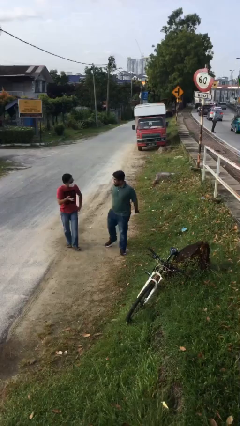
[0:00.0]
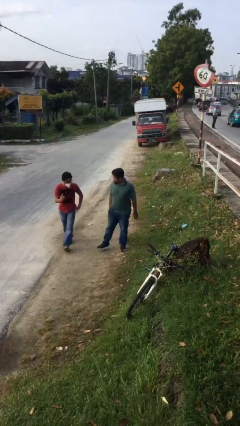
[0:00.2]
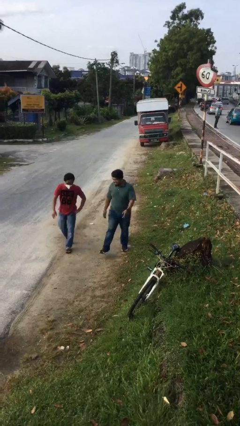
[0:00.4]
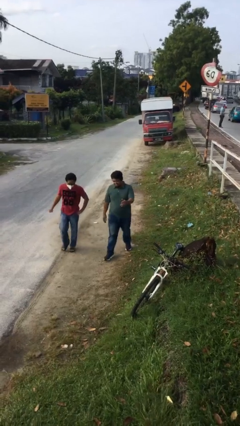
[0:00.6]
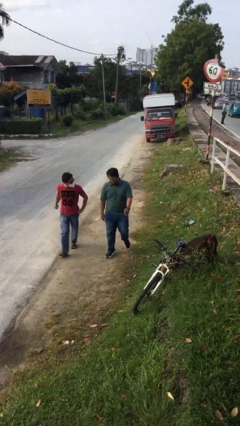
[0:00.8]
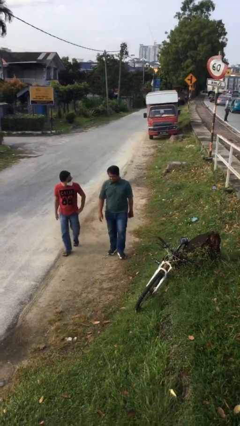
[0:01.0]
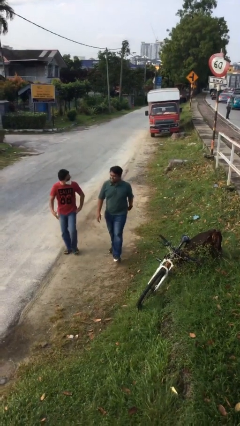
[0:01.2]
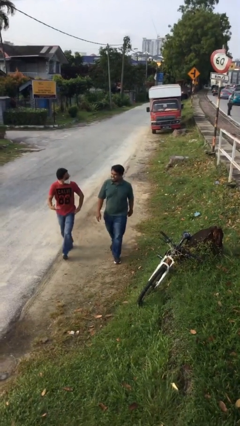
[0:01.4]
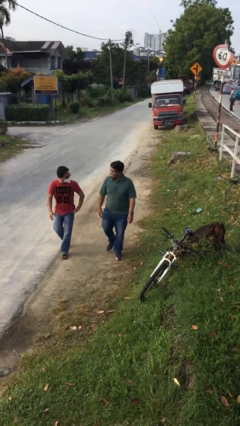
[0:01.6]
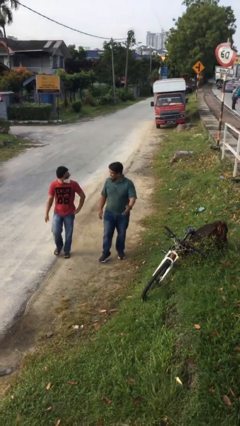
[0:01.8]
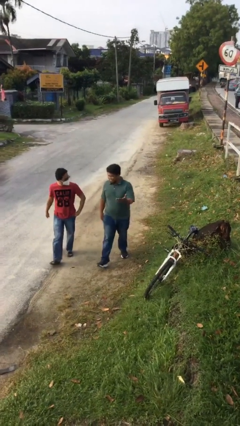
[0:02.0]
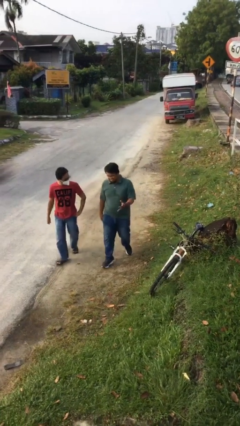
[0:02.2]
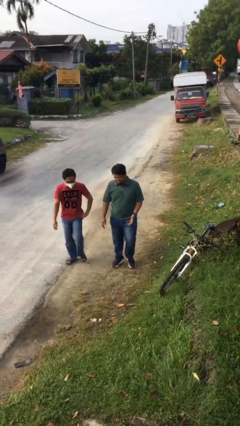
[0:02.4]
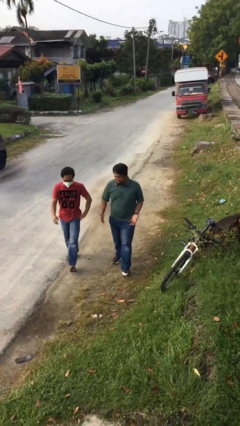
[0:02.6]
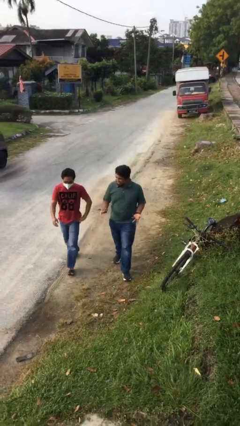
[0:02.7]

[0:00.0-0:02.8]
person talks to person

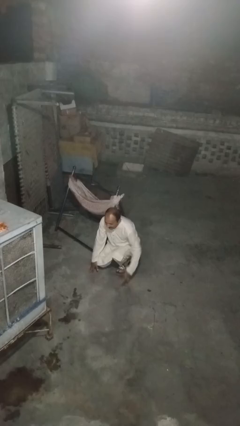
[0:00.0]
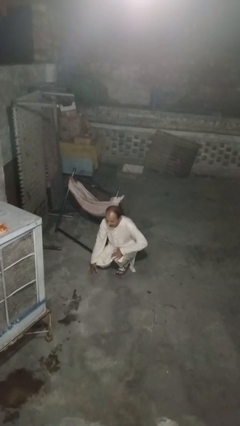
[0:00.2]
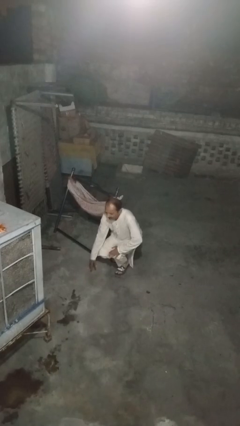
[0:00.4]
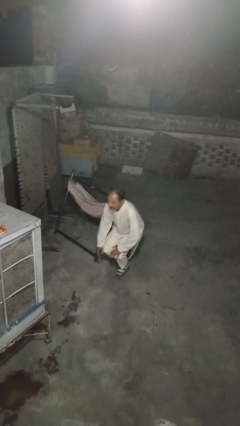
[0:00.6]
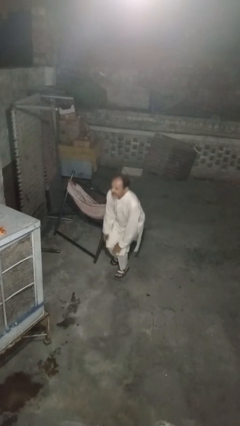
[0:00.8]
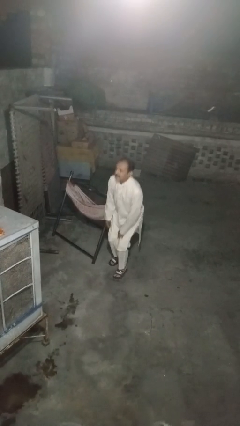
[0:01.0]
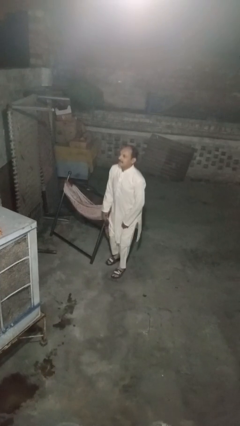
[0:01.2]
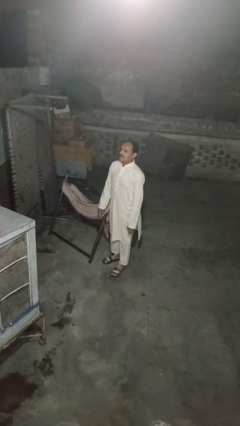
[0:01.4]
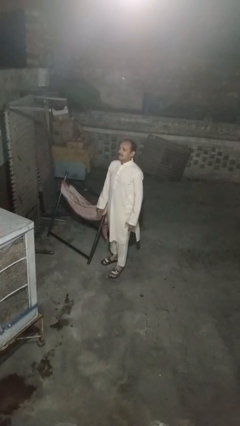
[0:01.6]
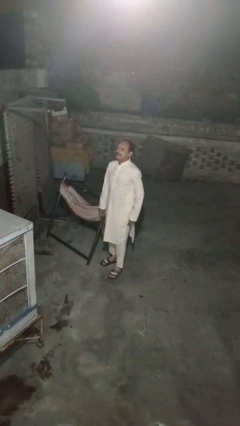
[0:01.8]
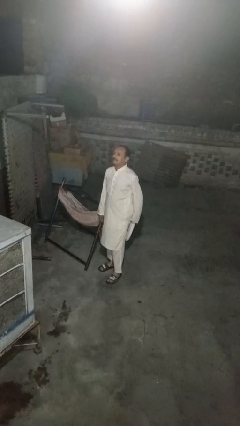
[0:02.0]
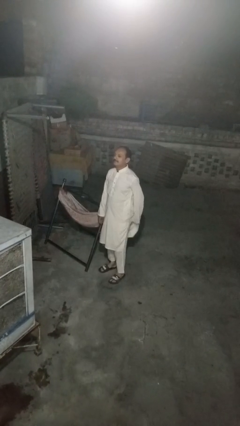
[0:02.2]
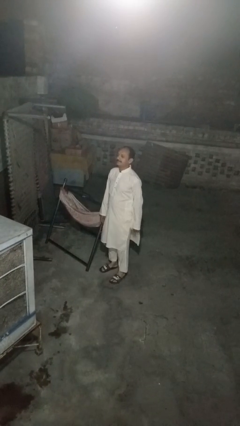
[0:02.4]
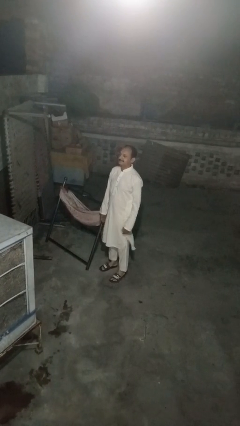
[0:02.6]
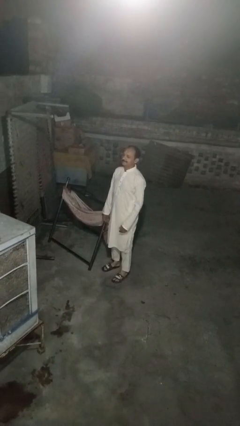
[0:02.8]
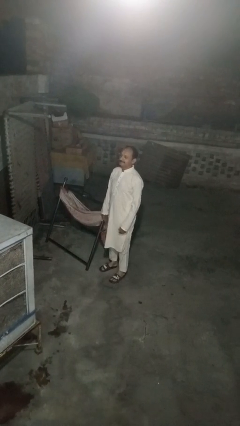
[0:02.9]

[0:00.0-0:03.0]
person stands up from floor

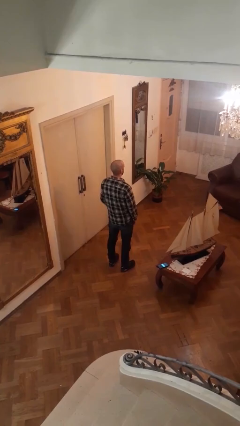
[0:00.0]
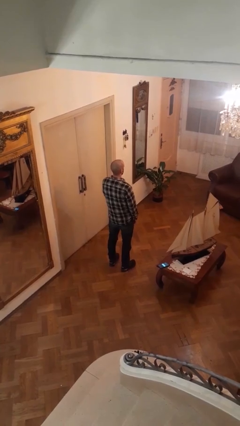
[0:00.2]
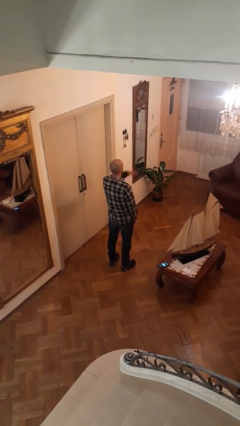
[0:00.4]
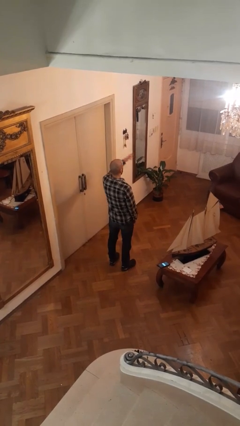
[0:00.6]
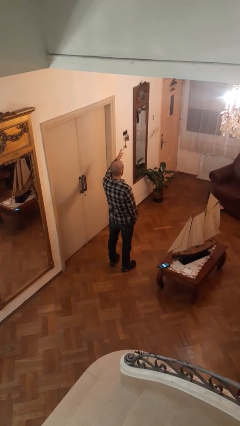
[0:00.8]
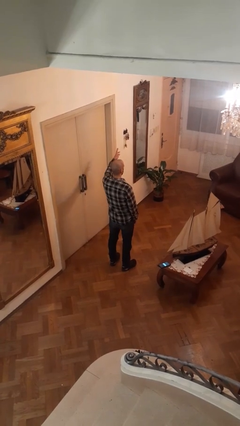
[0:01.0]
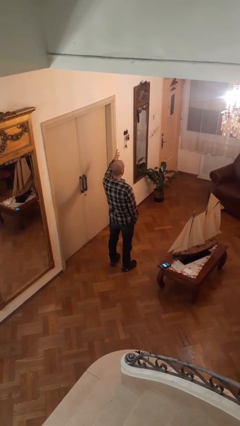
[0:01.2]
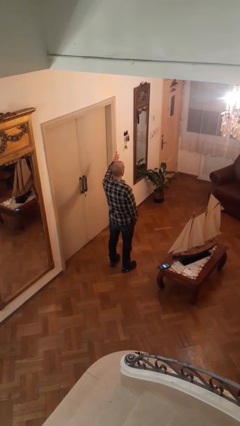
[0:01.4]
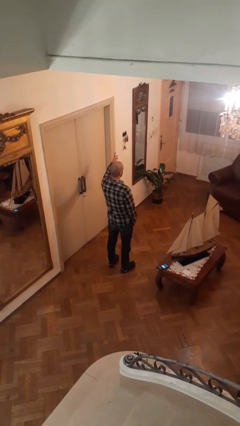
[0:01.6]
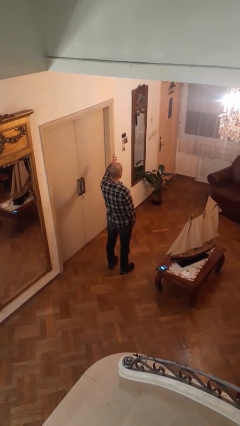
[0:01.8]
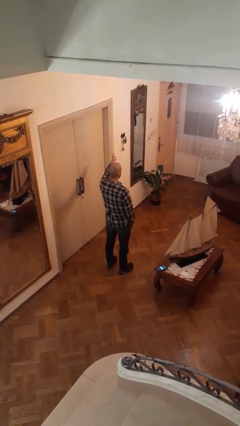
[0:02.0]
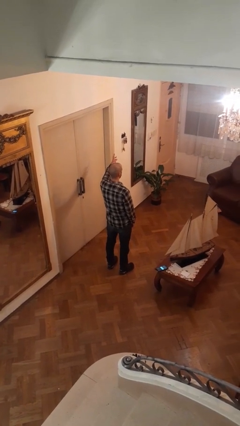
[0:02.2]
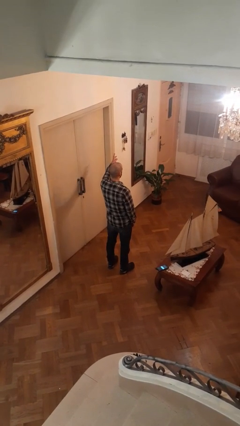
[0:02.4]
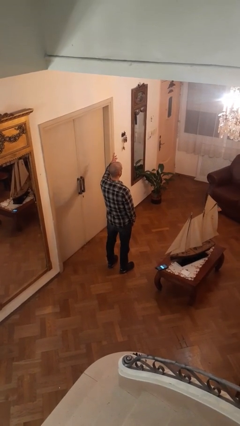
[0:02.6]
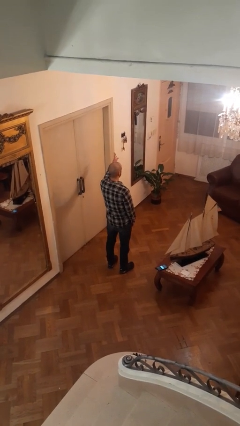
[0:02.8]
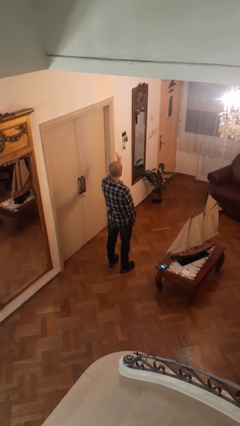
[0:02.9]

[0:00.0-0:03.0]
person gestures swipe left

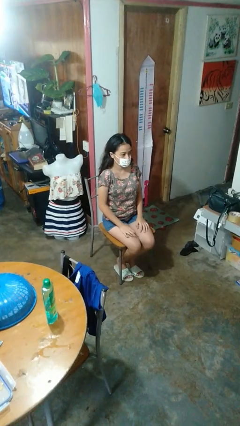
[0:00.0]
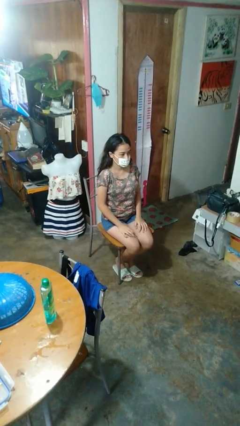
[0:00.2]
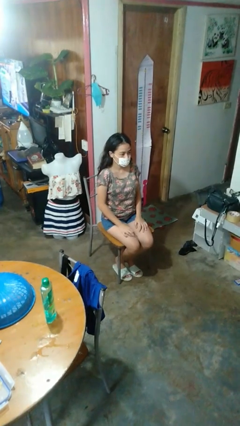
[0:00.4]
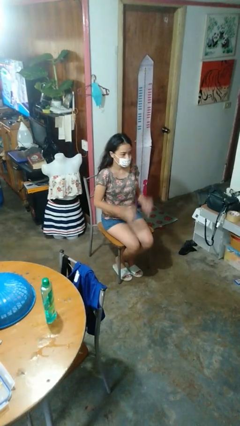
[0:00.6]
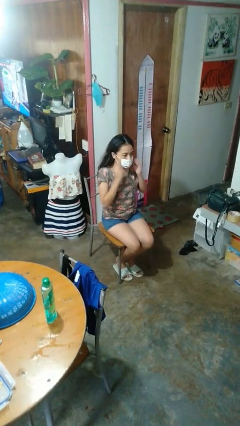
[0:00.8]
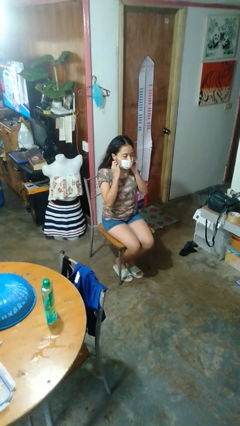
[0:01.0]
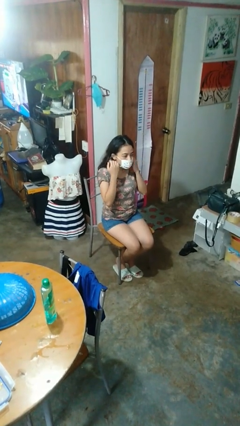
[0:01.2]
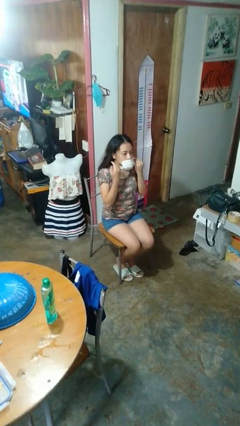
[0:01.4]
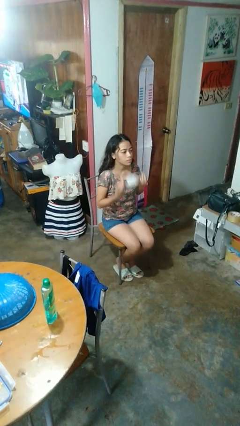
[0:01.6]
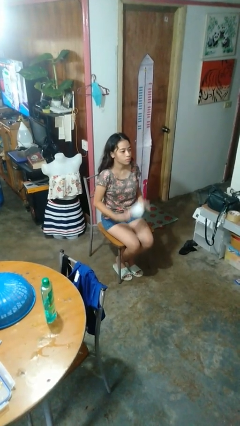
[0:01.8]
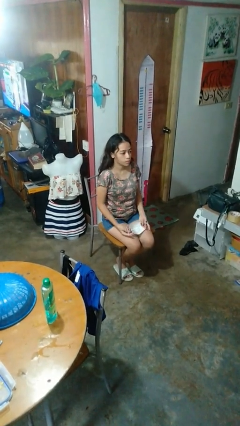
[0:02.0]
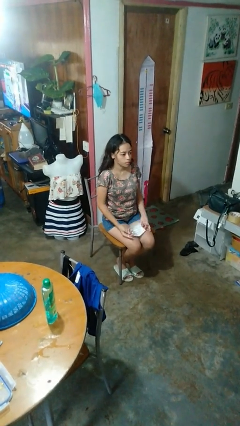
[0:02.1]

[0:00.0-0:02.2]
person closes mailbox

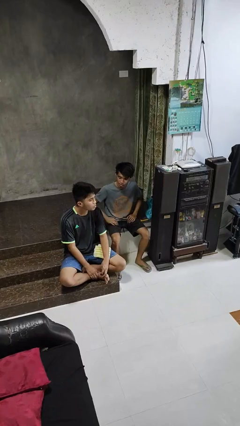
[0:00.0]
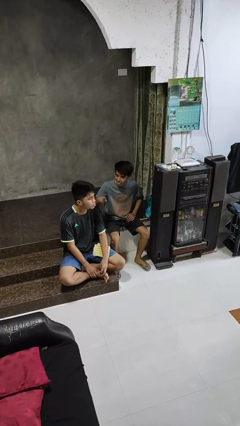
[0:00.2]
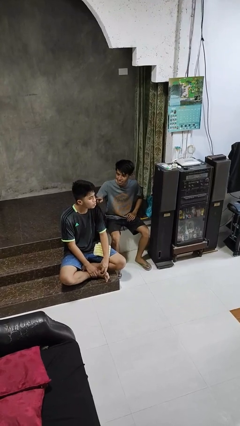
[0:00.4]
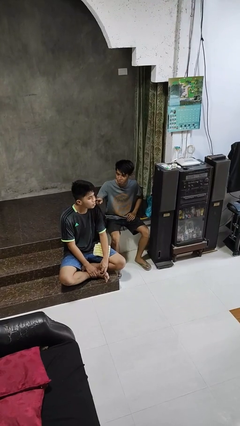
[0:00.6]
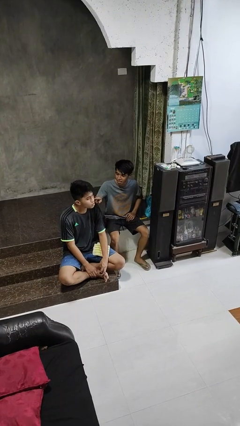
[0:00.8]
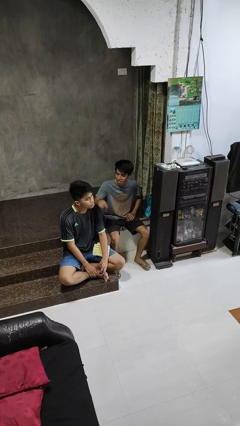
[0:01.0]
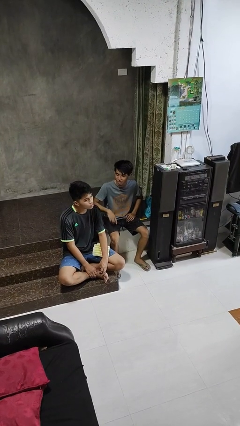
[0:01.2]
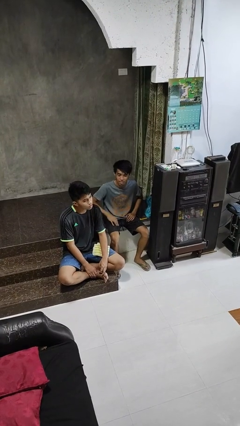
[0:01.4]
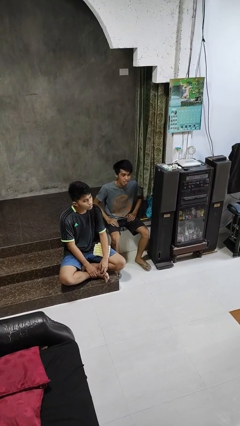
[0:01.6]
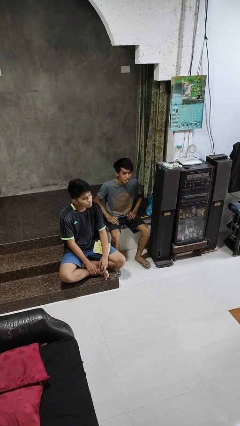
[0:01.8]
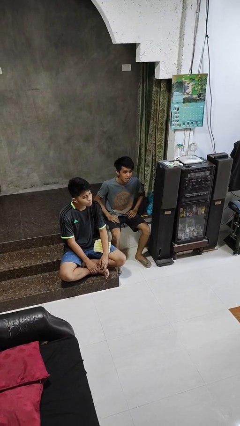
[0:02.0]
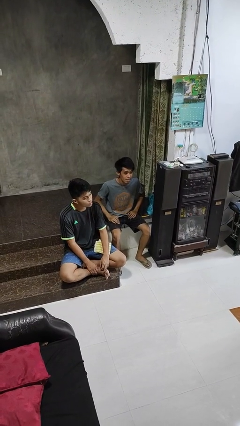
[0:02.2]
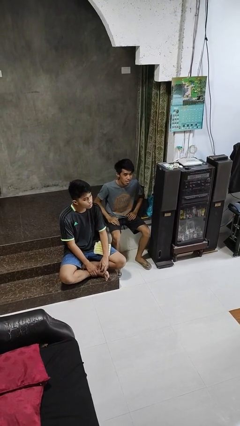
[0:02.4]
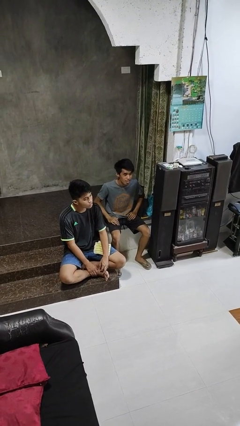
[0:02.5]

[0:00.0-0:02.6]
person touches face of person

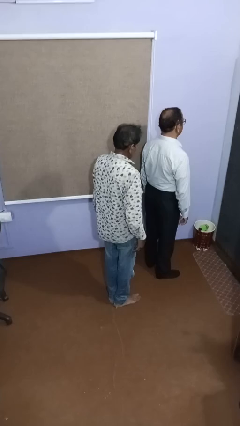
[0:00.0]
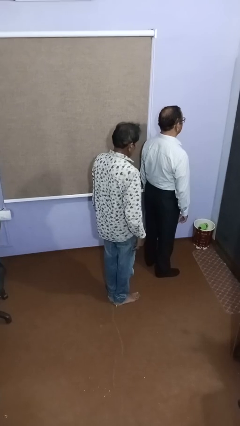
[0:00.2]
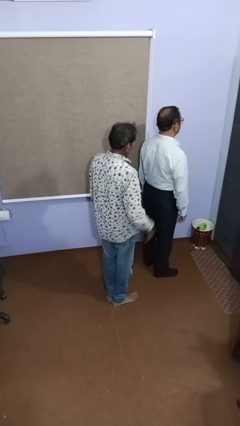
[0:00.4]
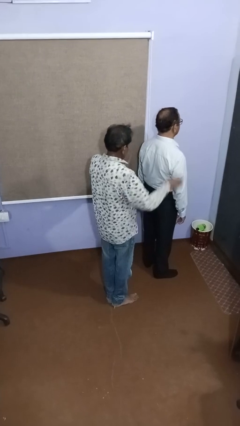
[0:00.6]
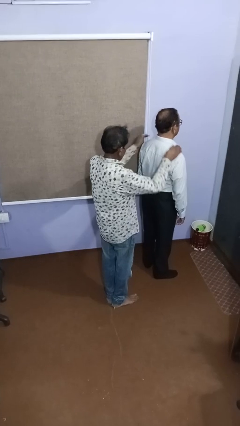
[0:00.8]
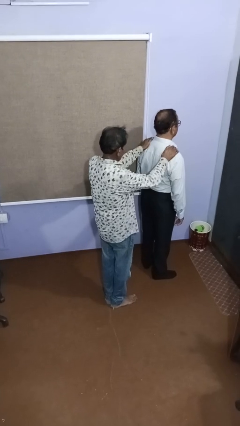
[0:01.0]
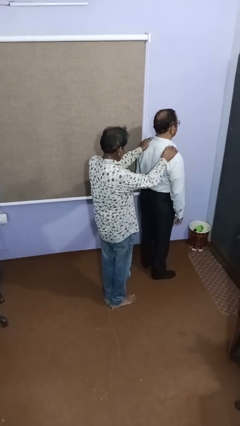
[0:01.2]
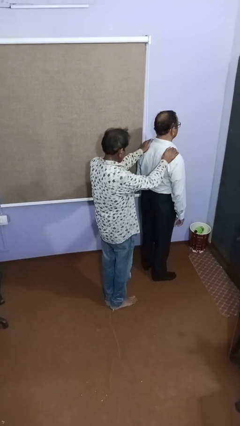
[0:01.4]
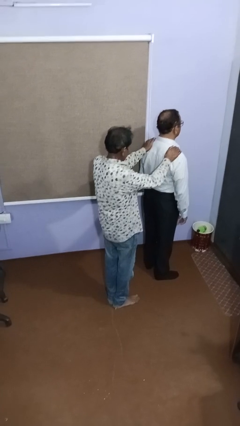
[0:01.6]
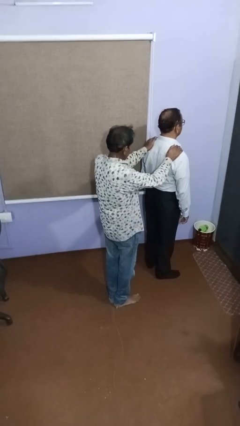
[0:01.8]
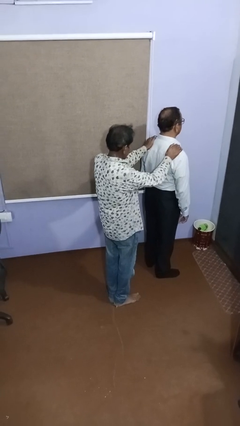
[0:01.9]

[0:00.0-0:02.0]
person grabs person by shoulder

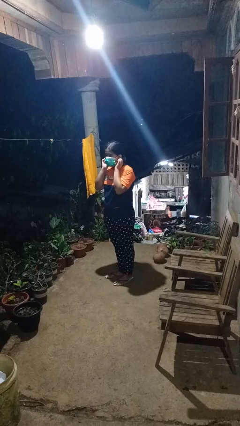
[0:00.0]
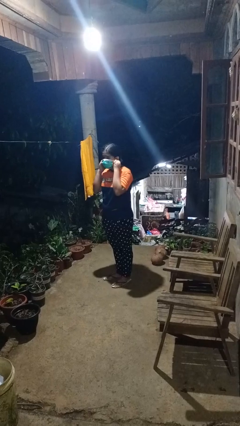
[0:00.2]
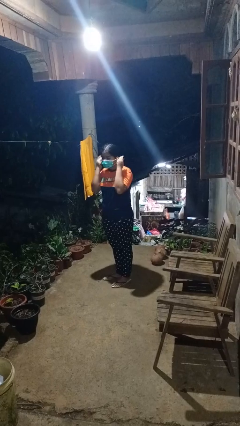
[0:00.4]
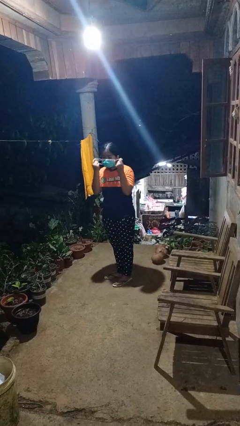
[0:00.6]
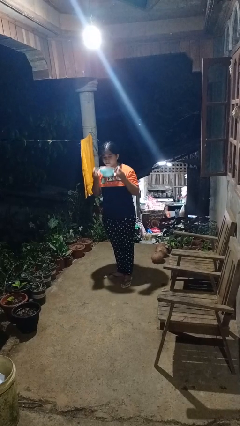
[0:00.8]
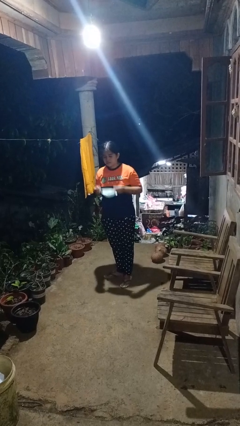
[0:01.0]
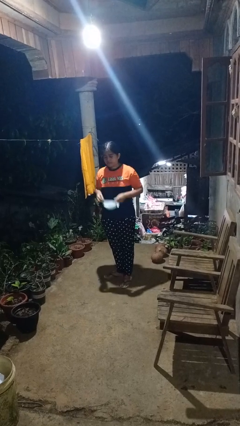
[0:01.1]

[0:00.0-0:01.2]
person takes off facemask

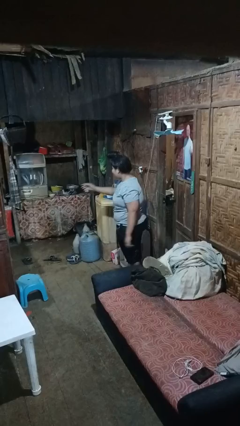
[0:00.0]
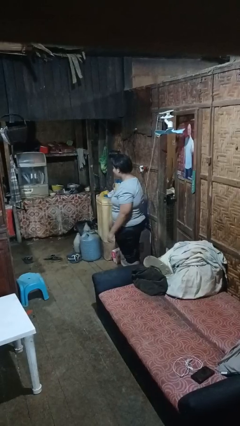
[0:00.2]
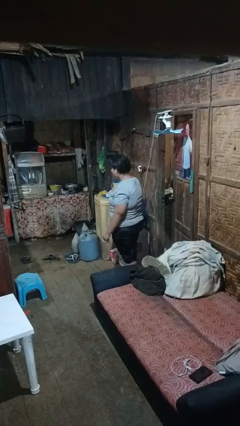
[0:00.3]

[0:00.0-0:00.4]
person karate chop
